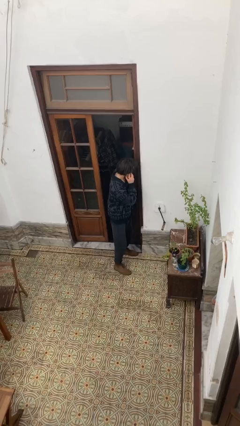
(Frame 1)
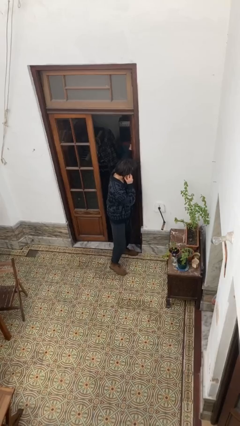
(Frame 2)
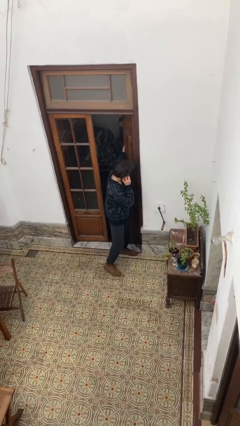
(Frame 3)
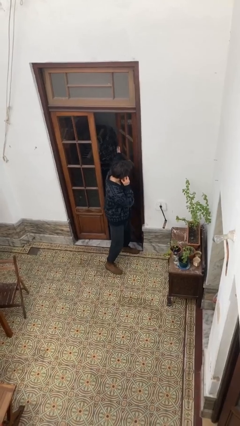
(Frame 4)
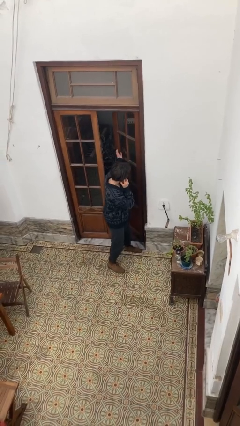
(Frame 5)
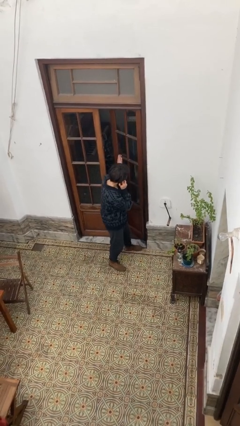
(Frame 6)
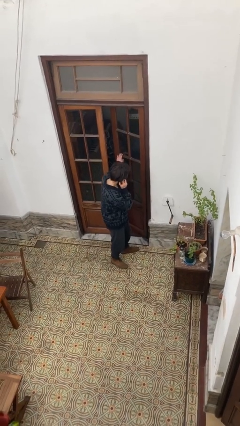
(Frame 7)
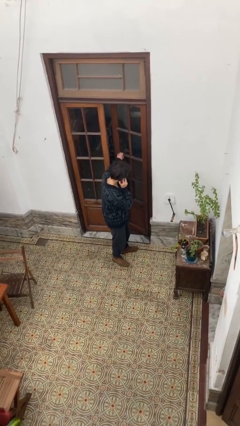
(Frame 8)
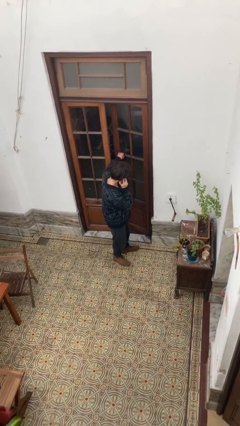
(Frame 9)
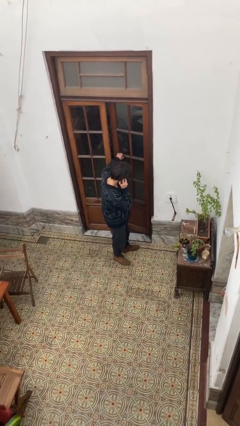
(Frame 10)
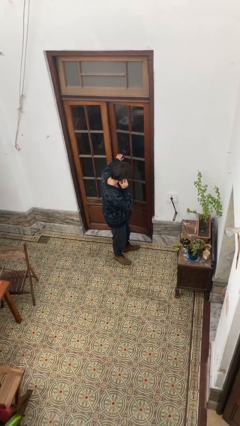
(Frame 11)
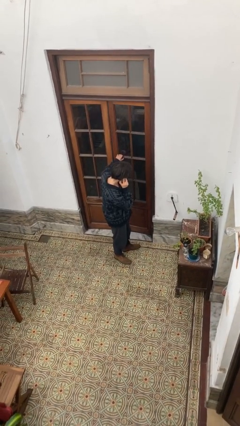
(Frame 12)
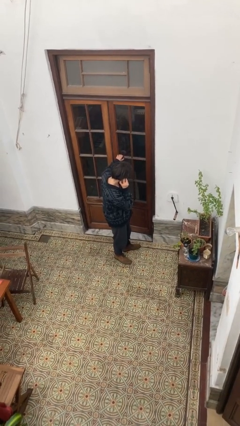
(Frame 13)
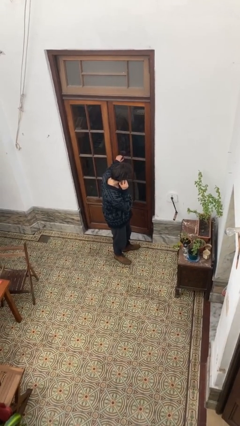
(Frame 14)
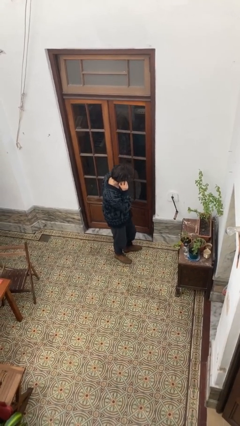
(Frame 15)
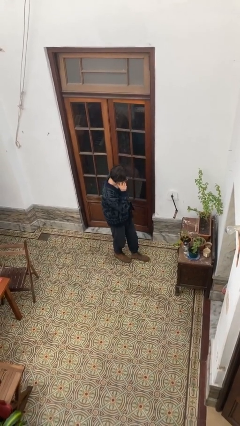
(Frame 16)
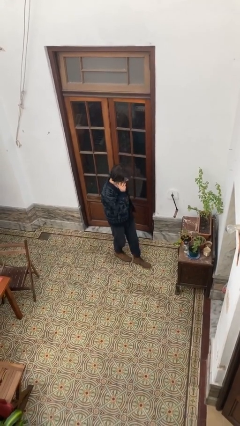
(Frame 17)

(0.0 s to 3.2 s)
person closes facility door

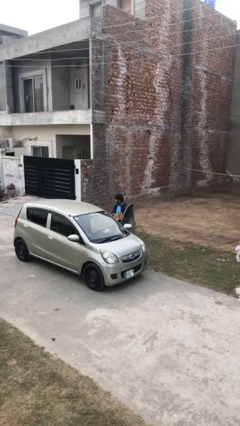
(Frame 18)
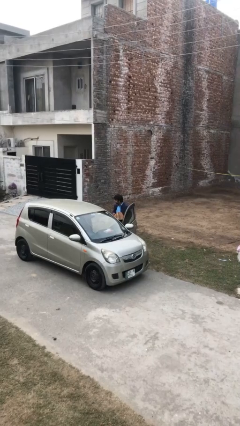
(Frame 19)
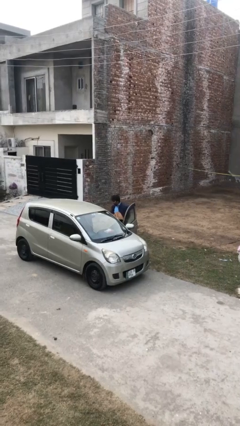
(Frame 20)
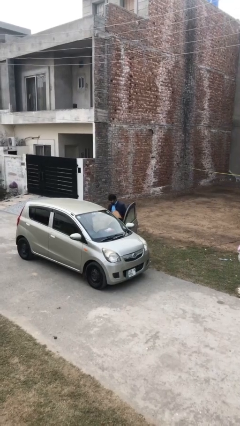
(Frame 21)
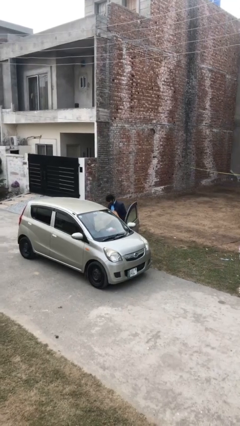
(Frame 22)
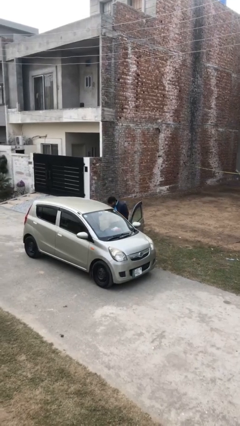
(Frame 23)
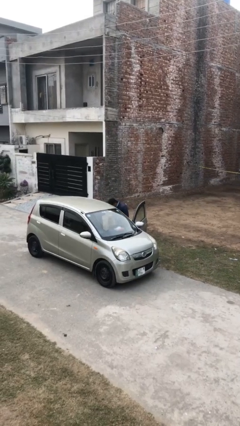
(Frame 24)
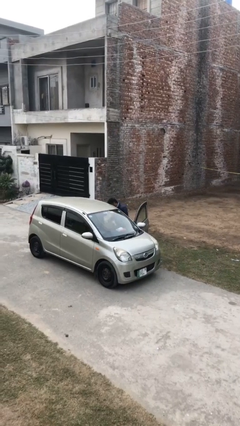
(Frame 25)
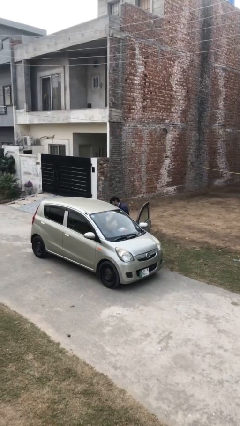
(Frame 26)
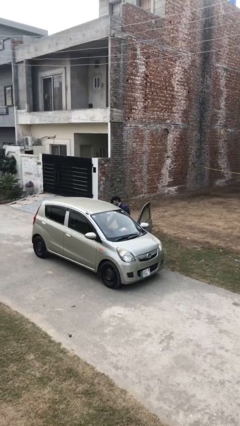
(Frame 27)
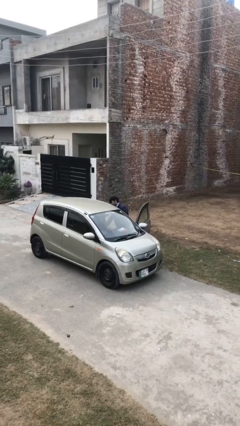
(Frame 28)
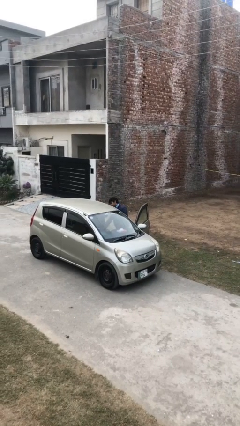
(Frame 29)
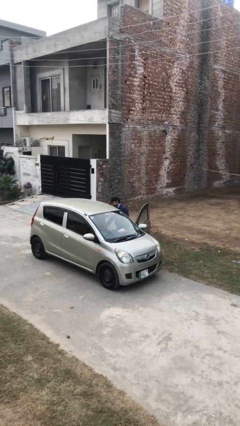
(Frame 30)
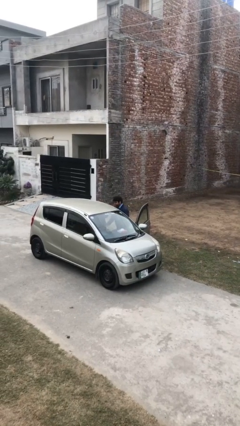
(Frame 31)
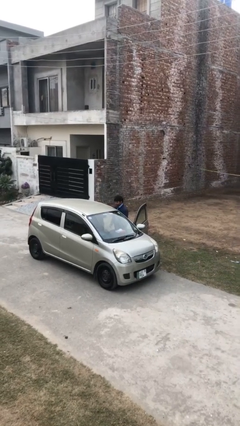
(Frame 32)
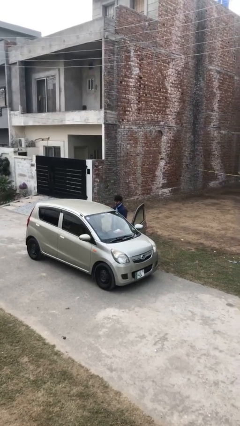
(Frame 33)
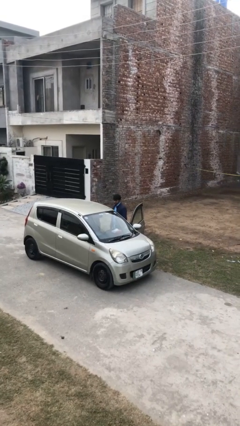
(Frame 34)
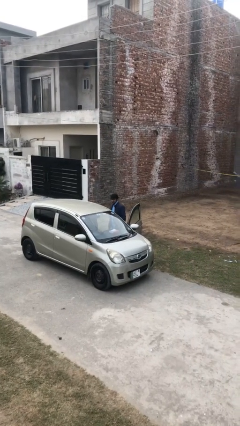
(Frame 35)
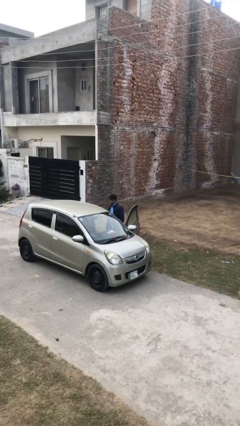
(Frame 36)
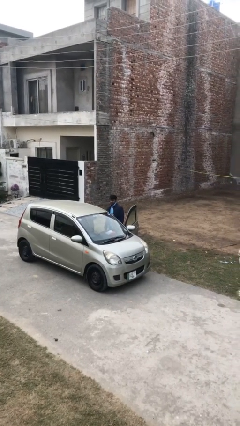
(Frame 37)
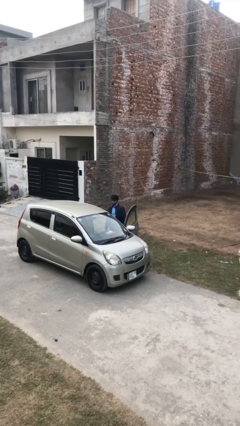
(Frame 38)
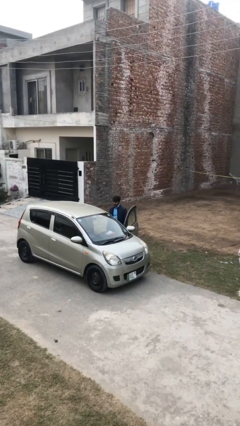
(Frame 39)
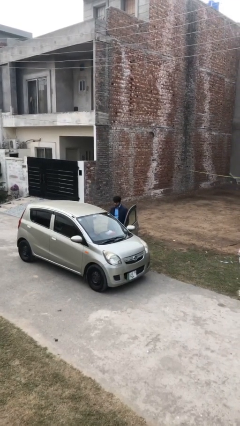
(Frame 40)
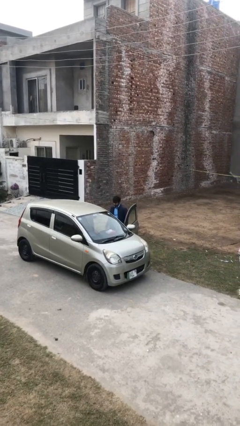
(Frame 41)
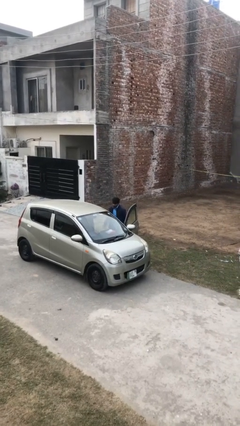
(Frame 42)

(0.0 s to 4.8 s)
person loads car

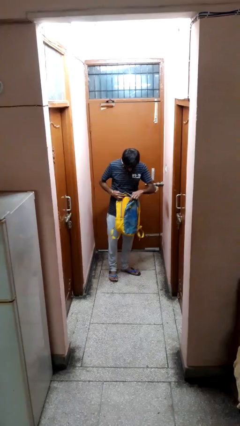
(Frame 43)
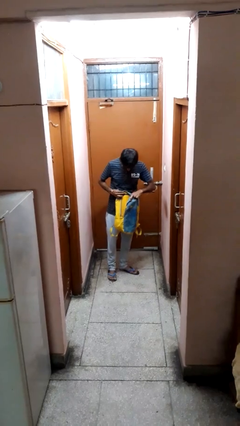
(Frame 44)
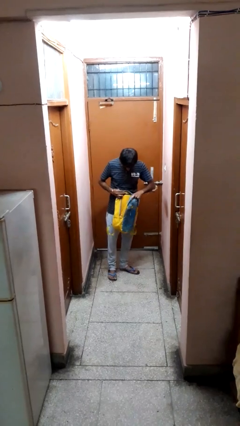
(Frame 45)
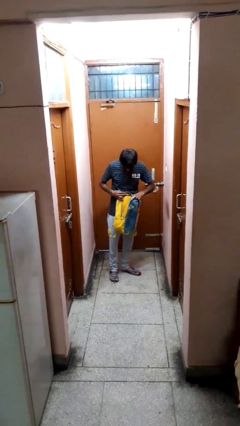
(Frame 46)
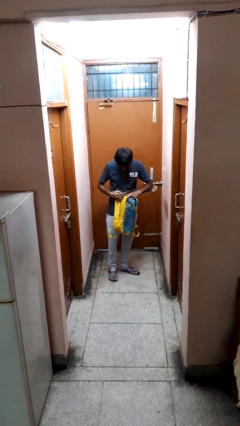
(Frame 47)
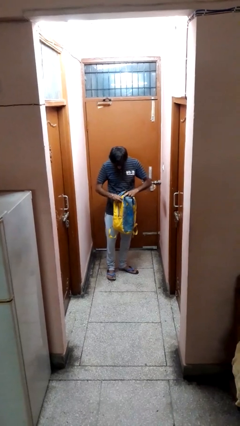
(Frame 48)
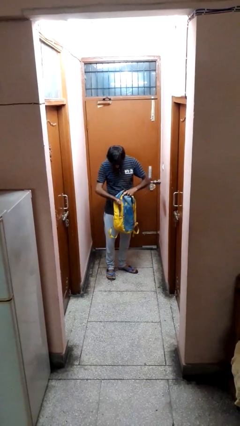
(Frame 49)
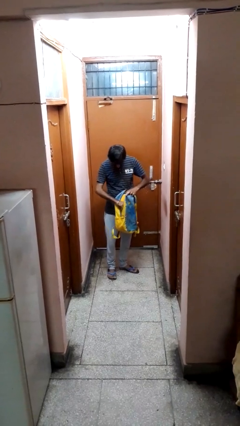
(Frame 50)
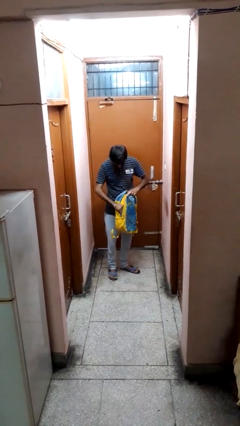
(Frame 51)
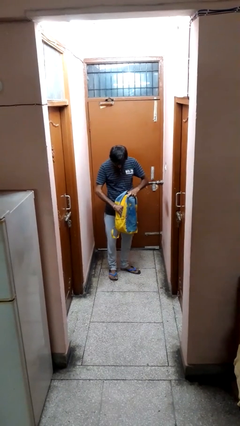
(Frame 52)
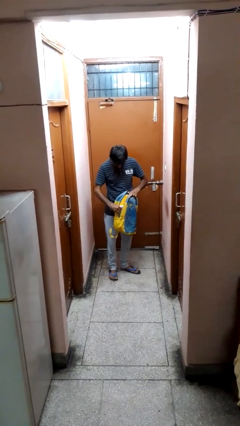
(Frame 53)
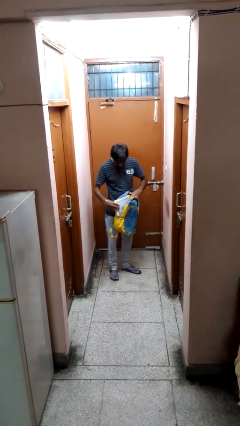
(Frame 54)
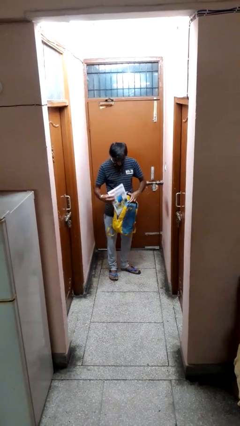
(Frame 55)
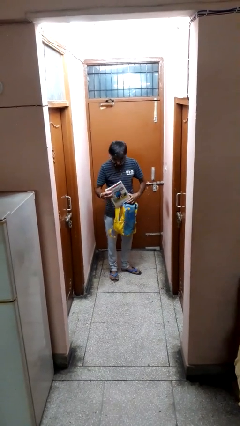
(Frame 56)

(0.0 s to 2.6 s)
person searches in backpack

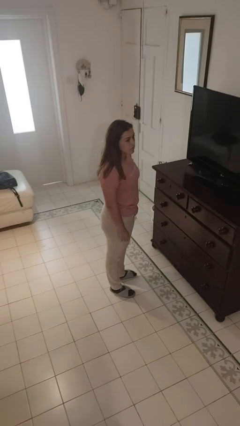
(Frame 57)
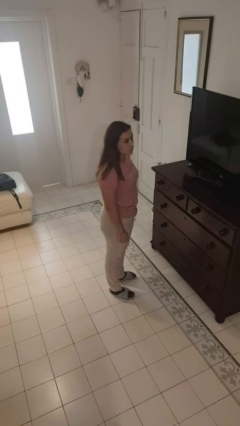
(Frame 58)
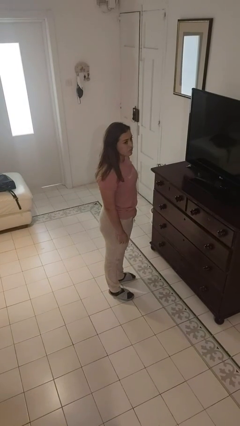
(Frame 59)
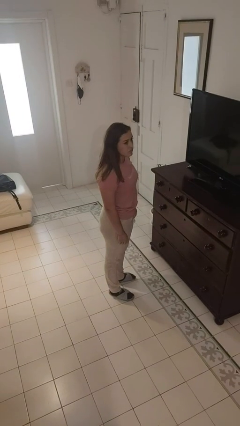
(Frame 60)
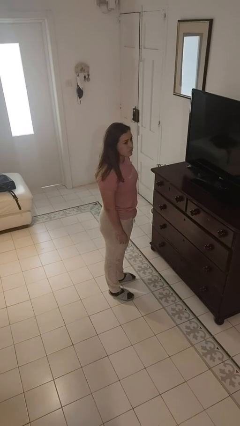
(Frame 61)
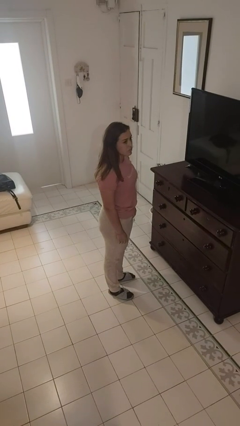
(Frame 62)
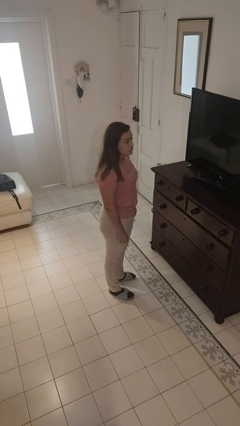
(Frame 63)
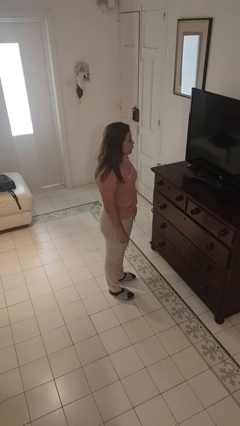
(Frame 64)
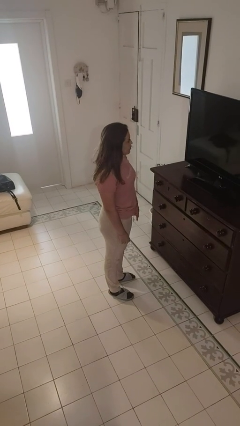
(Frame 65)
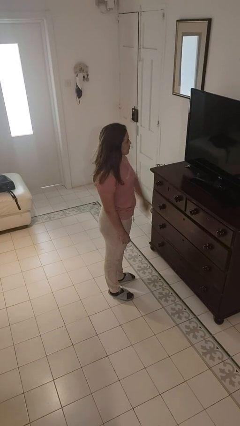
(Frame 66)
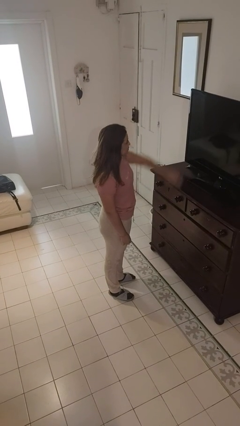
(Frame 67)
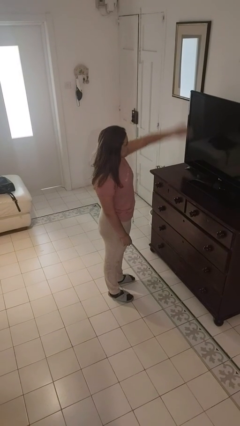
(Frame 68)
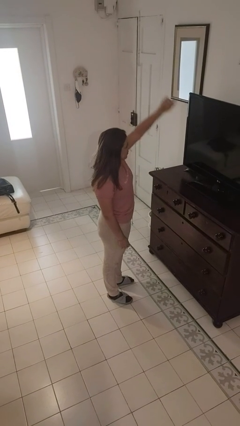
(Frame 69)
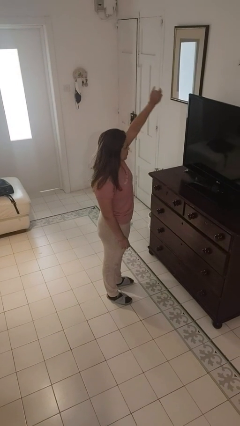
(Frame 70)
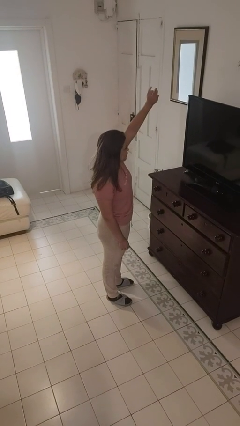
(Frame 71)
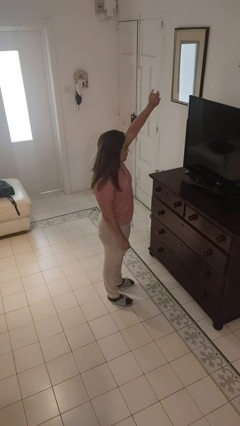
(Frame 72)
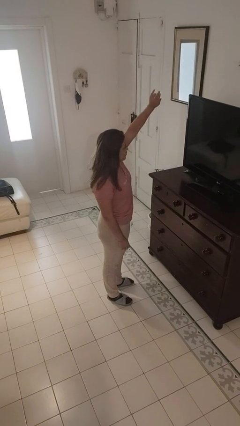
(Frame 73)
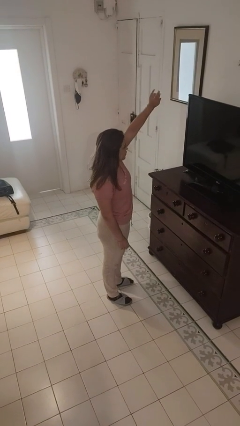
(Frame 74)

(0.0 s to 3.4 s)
person gestures swipe up

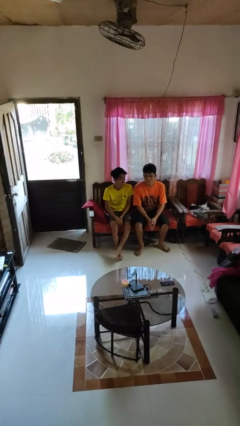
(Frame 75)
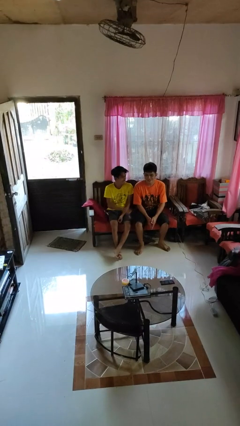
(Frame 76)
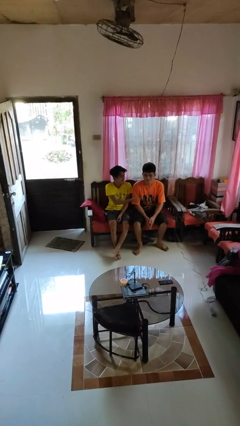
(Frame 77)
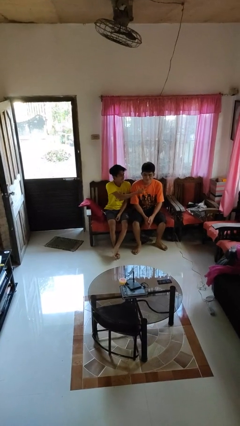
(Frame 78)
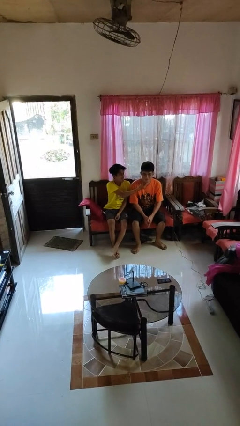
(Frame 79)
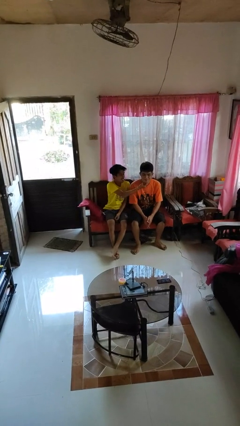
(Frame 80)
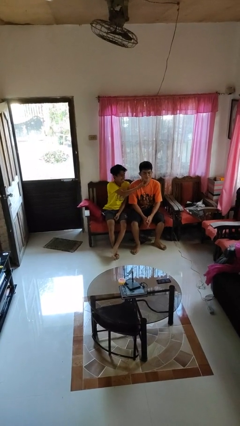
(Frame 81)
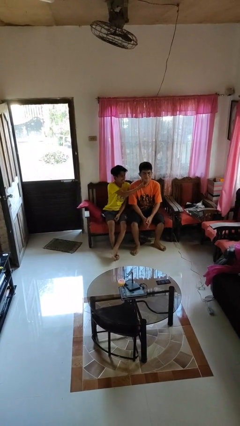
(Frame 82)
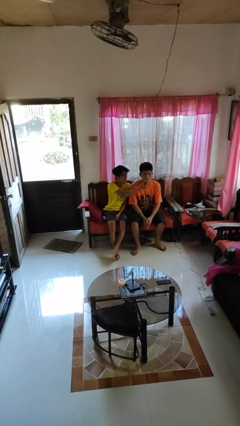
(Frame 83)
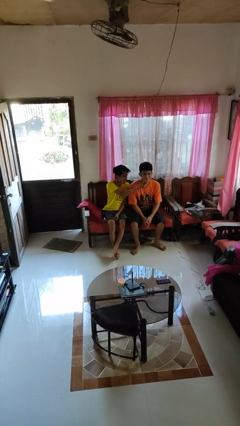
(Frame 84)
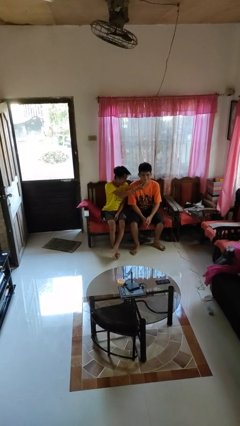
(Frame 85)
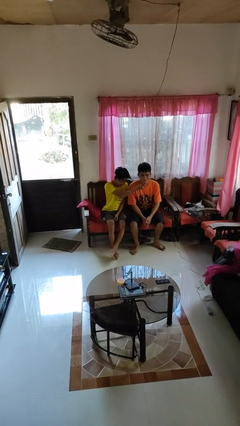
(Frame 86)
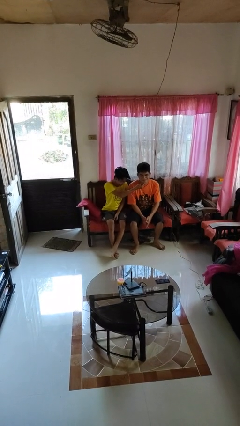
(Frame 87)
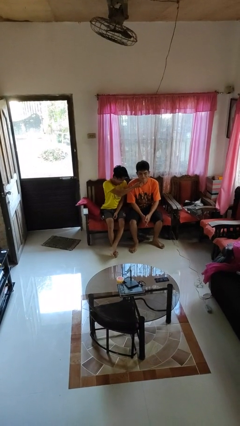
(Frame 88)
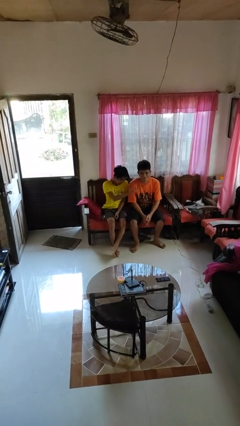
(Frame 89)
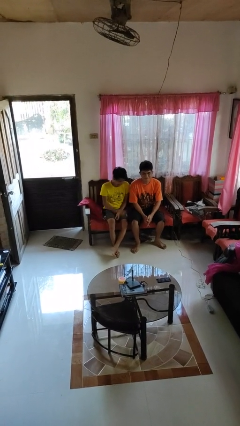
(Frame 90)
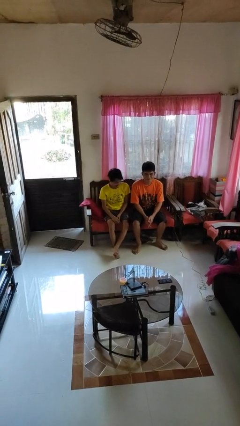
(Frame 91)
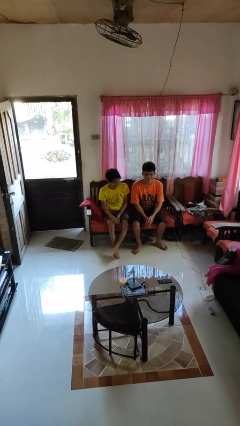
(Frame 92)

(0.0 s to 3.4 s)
person touches face of person

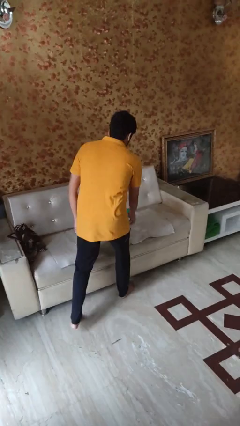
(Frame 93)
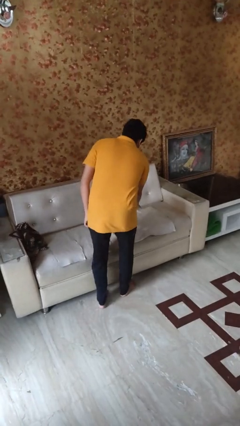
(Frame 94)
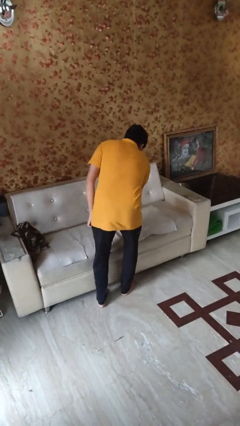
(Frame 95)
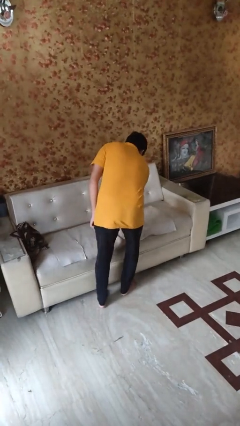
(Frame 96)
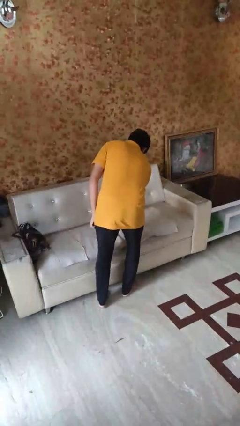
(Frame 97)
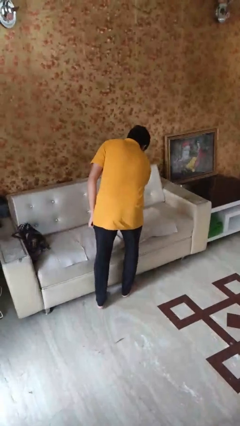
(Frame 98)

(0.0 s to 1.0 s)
person picks up object from bed
